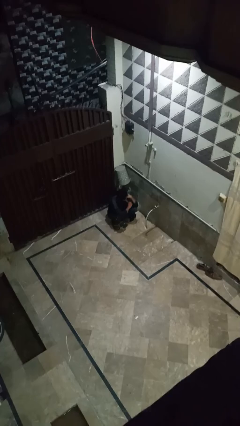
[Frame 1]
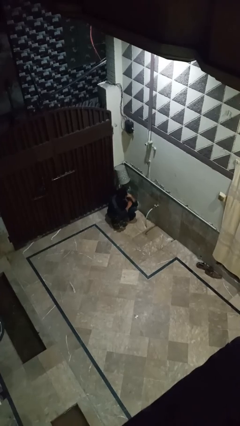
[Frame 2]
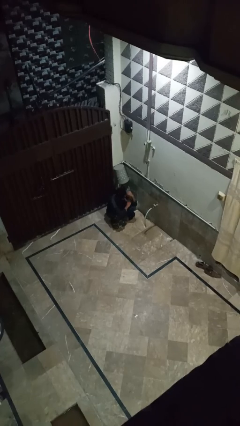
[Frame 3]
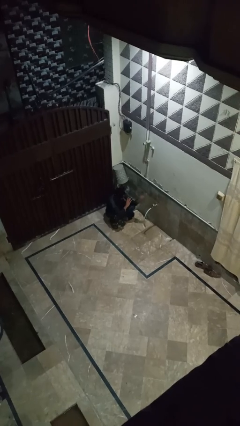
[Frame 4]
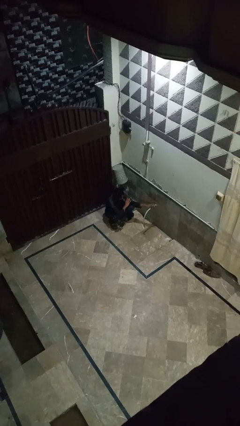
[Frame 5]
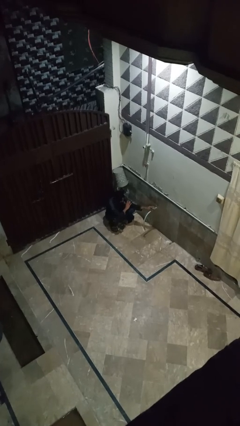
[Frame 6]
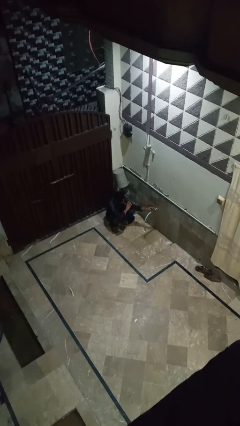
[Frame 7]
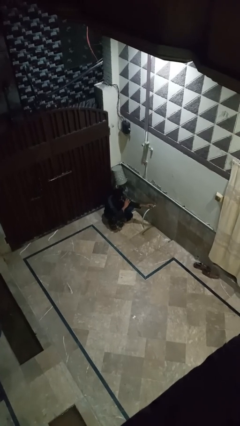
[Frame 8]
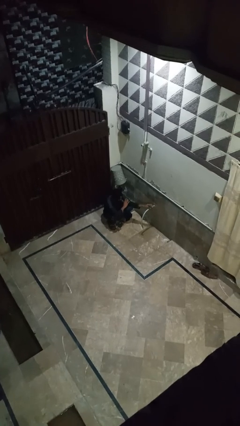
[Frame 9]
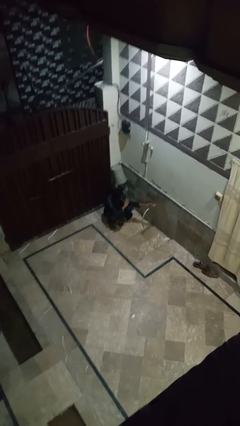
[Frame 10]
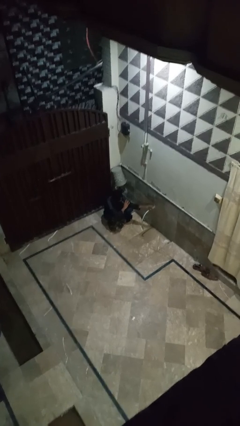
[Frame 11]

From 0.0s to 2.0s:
person turns on faucet

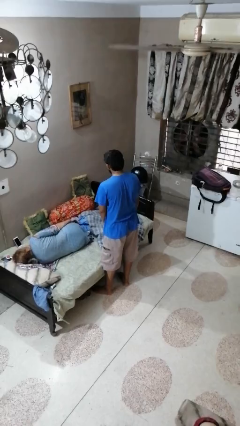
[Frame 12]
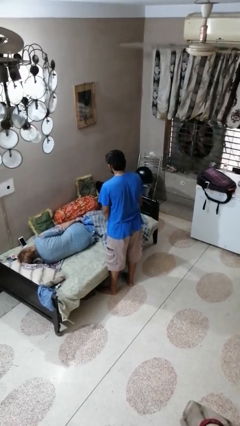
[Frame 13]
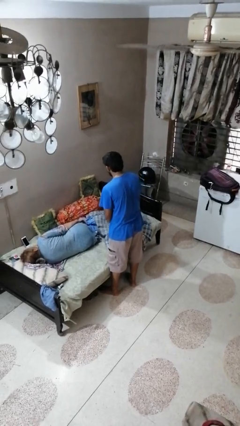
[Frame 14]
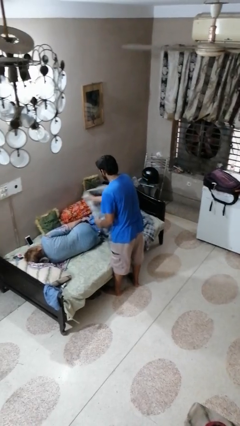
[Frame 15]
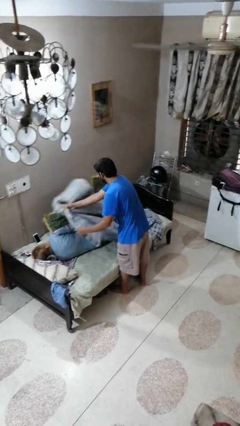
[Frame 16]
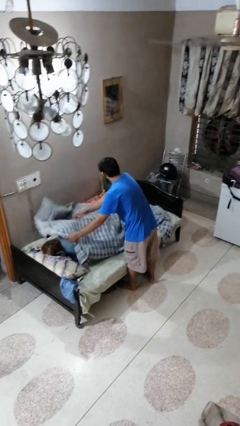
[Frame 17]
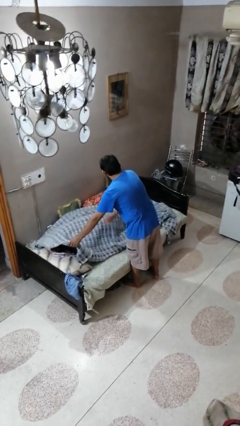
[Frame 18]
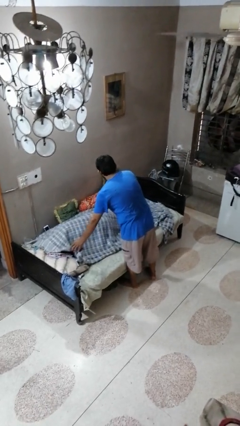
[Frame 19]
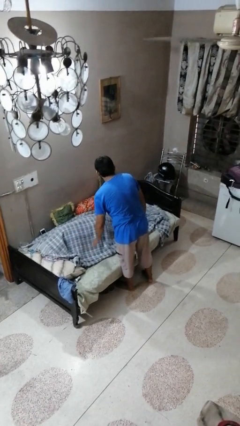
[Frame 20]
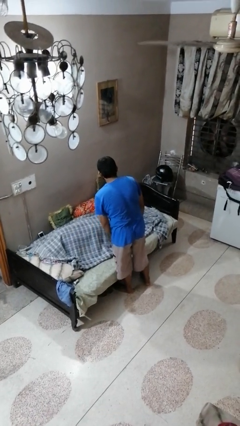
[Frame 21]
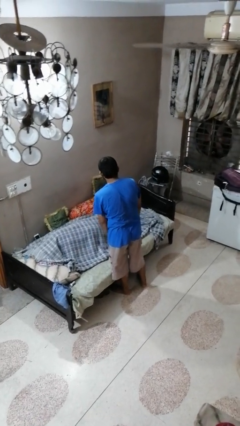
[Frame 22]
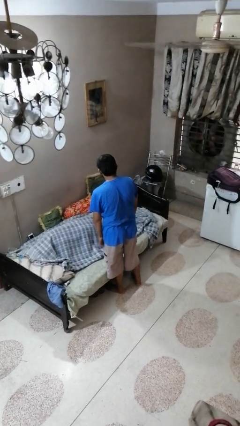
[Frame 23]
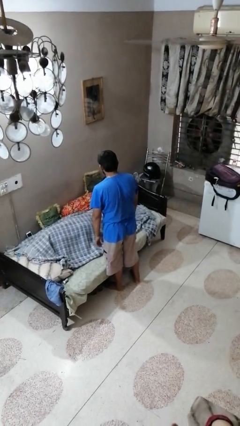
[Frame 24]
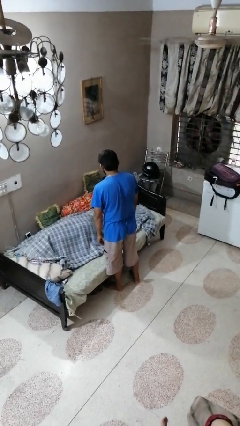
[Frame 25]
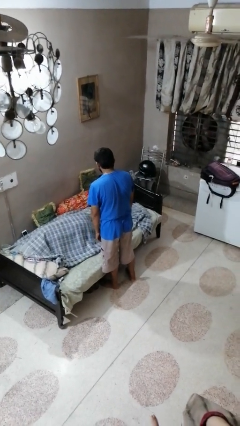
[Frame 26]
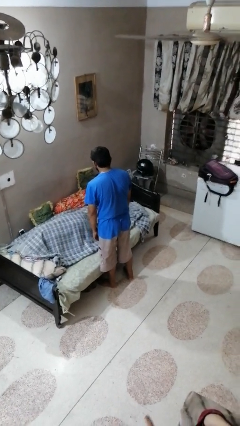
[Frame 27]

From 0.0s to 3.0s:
person covers friend with blanket

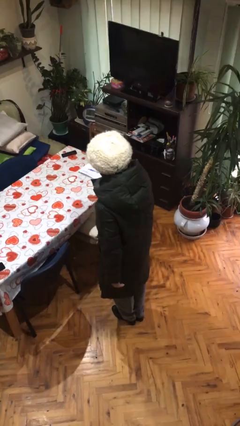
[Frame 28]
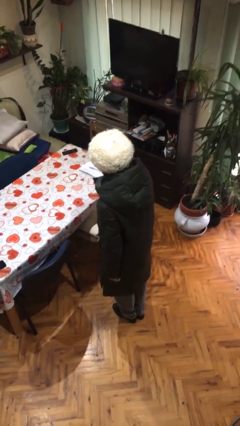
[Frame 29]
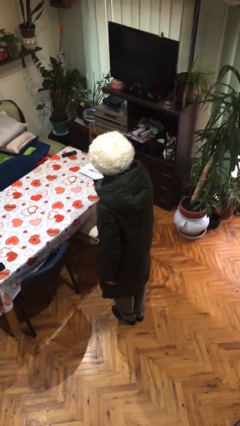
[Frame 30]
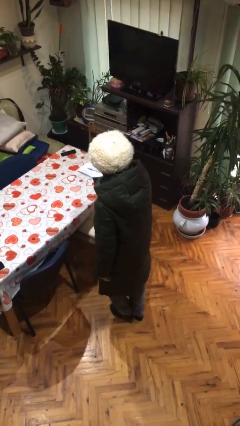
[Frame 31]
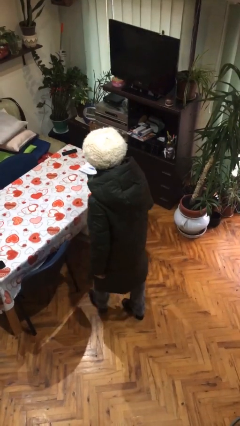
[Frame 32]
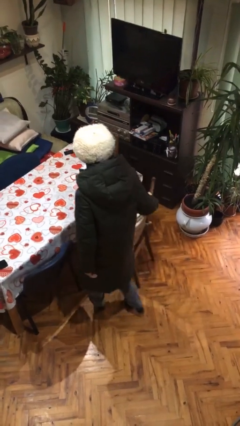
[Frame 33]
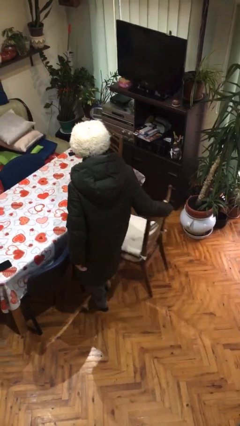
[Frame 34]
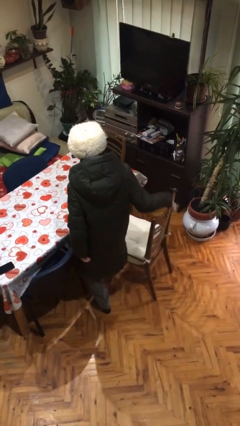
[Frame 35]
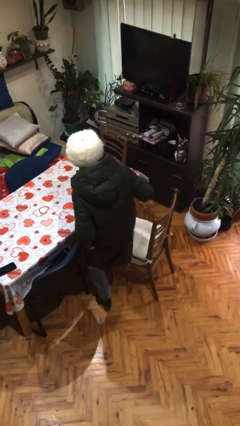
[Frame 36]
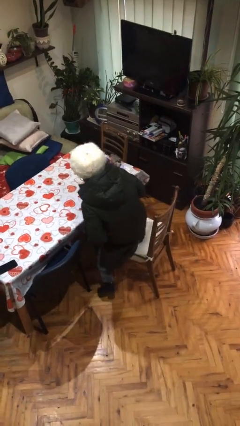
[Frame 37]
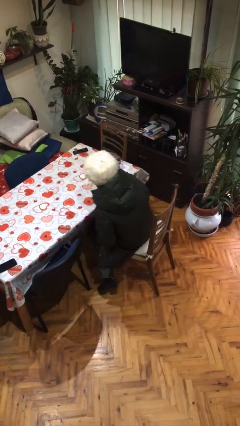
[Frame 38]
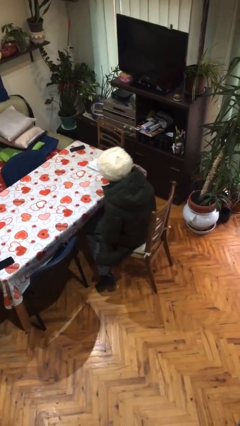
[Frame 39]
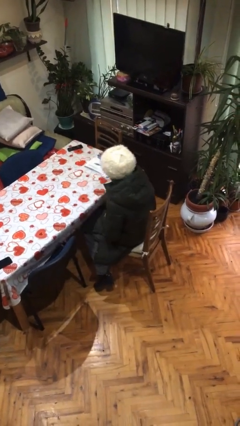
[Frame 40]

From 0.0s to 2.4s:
person sits down

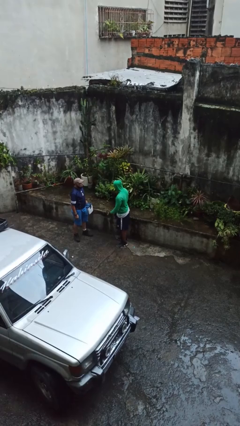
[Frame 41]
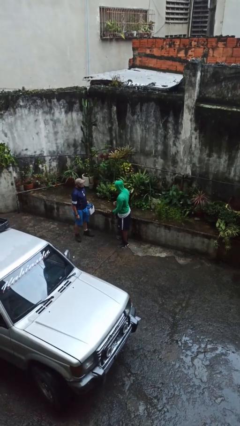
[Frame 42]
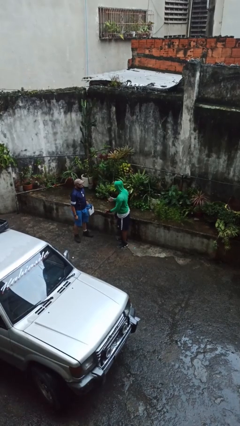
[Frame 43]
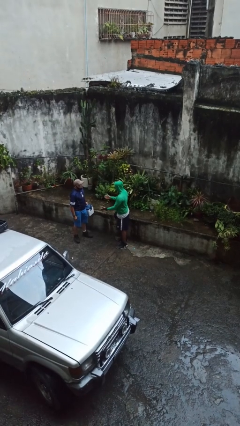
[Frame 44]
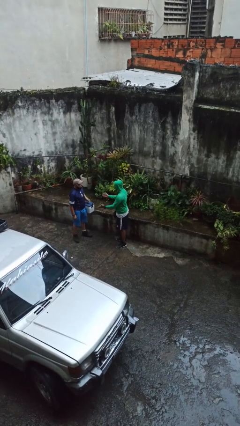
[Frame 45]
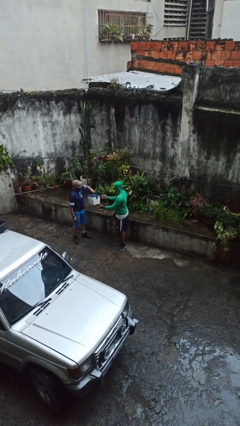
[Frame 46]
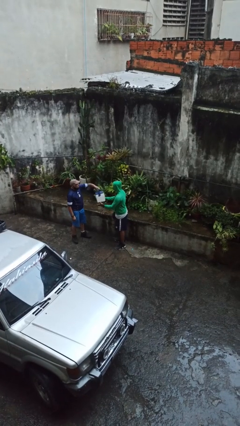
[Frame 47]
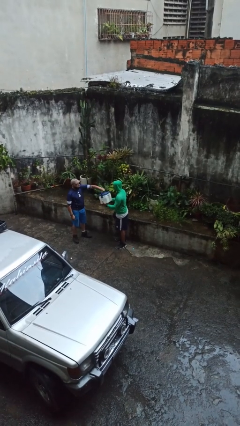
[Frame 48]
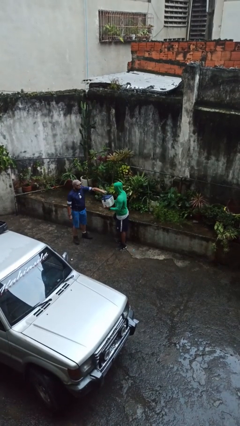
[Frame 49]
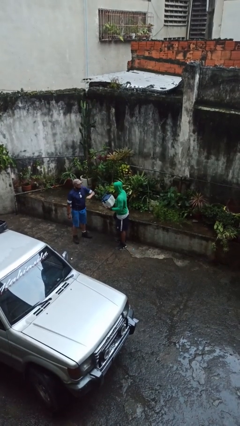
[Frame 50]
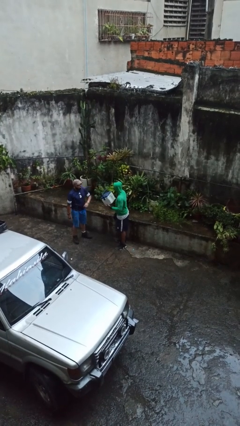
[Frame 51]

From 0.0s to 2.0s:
person transfers object to person

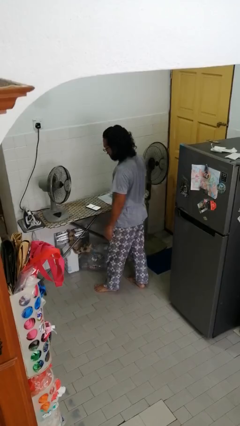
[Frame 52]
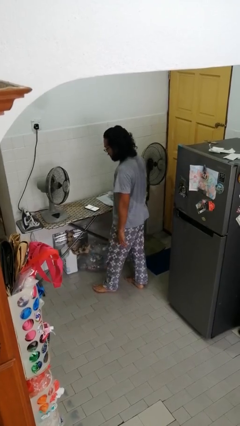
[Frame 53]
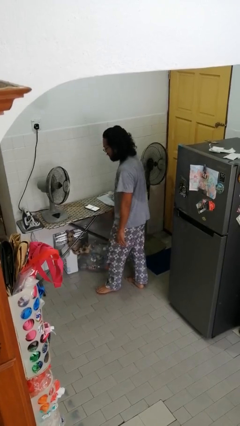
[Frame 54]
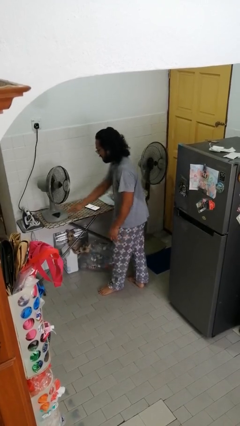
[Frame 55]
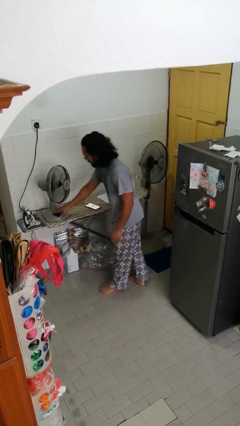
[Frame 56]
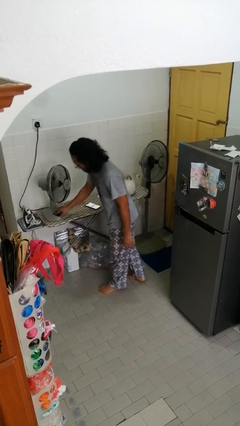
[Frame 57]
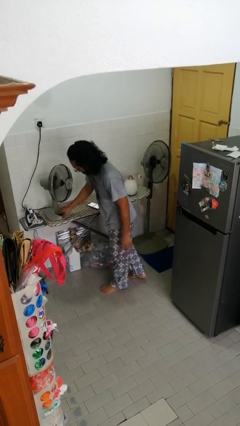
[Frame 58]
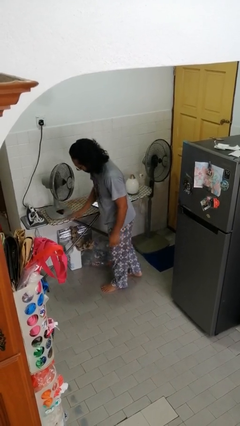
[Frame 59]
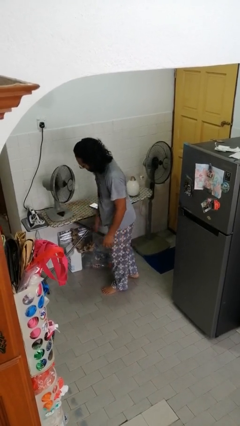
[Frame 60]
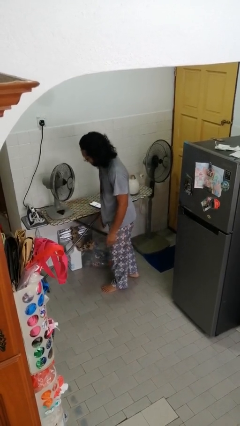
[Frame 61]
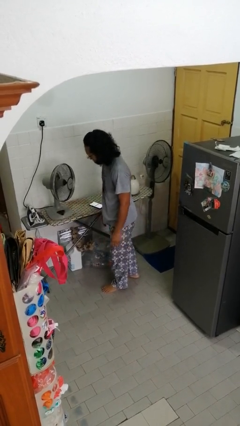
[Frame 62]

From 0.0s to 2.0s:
person turns off fan

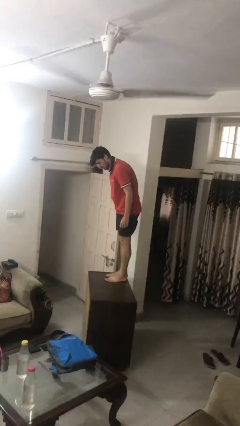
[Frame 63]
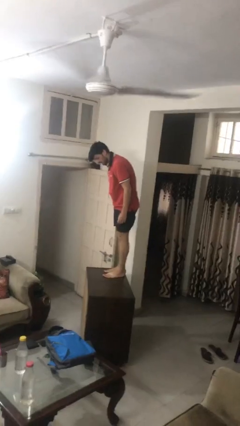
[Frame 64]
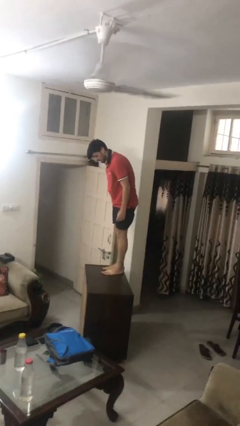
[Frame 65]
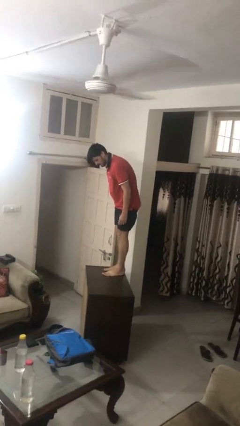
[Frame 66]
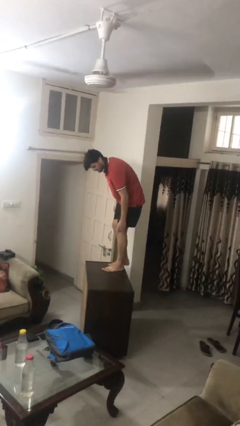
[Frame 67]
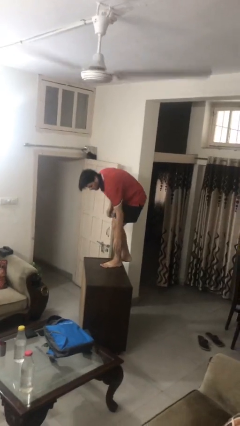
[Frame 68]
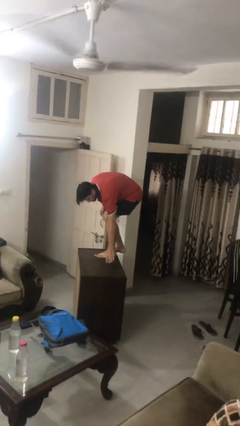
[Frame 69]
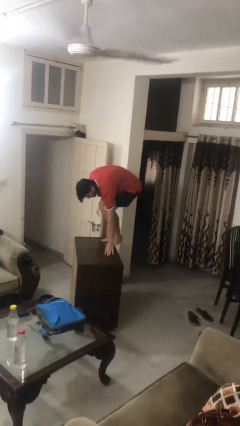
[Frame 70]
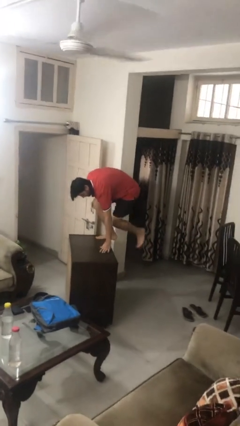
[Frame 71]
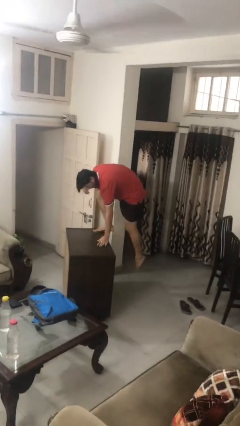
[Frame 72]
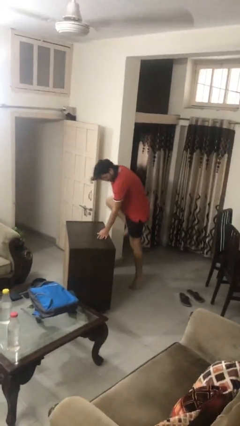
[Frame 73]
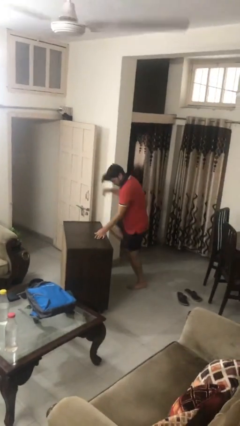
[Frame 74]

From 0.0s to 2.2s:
person climbs off table

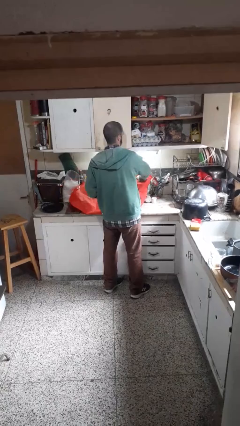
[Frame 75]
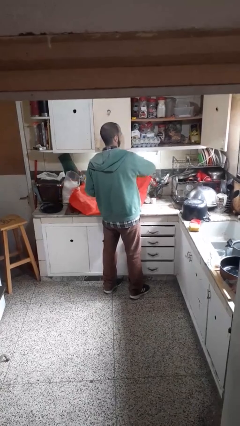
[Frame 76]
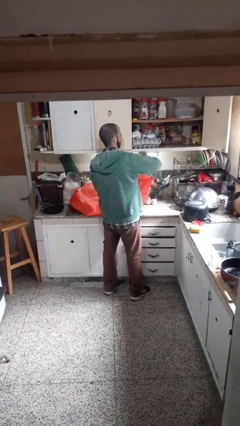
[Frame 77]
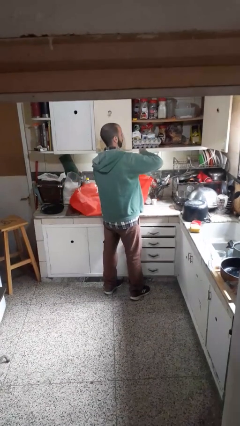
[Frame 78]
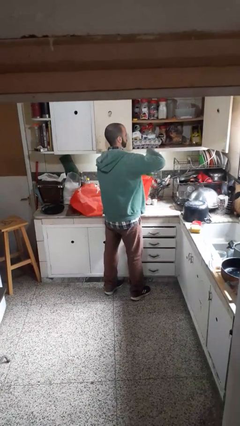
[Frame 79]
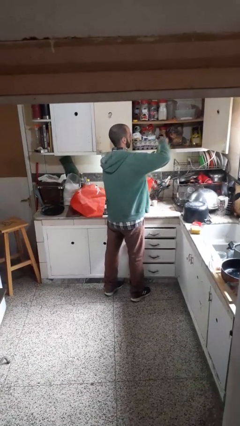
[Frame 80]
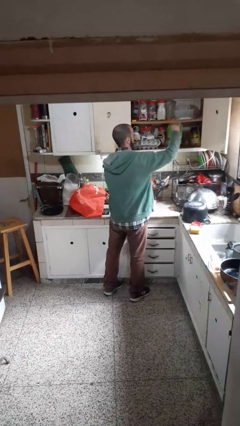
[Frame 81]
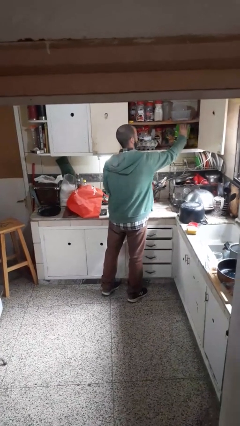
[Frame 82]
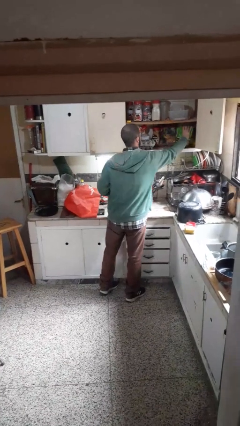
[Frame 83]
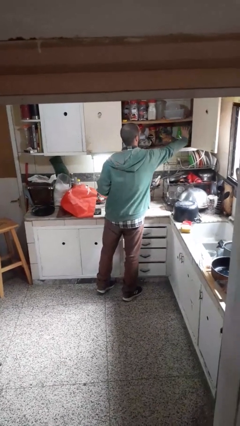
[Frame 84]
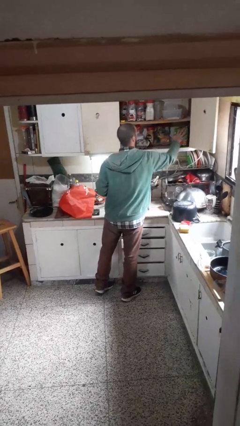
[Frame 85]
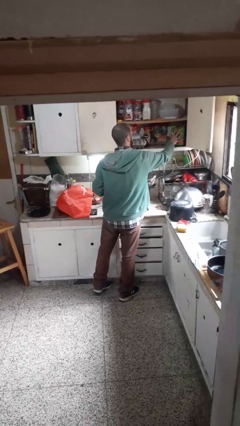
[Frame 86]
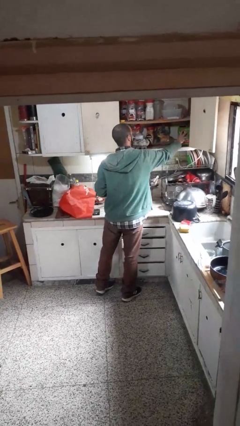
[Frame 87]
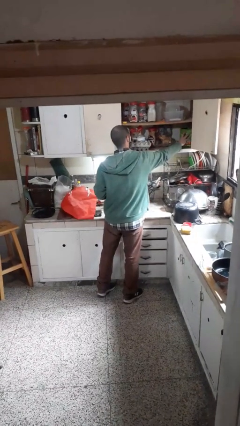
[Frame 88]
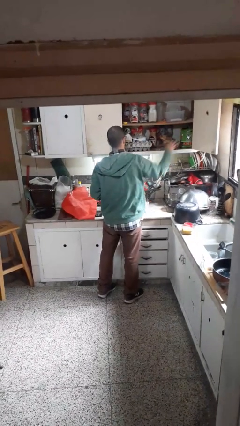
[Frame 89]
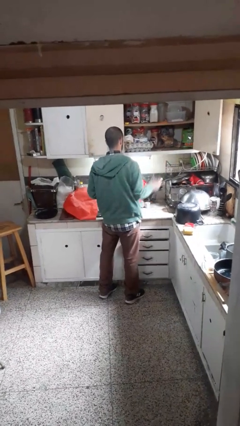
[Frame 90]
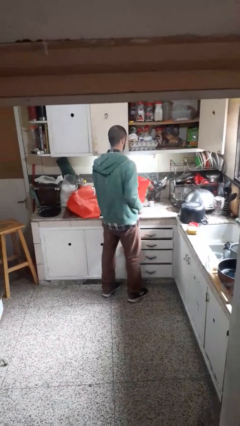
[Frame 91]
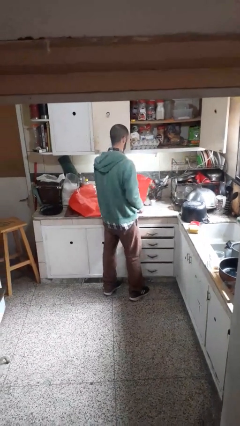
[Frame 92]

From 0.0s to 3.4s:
person loads groceries into cabinet
